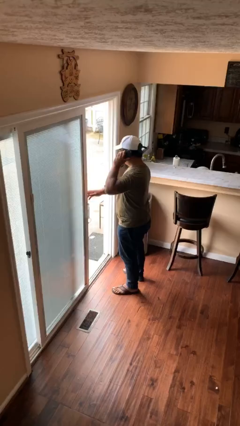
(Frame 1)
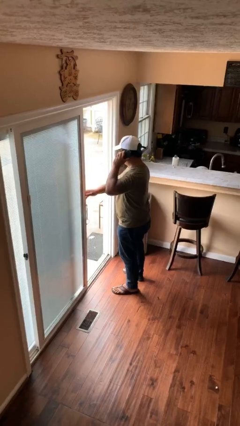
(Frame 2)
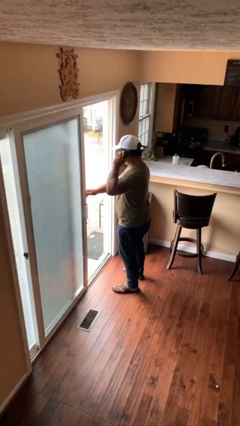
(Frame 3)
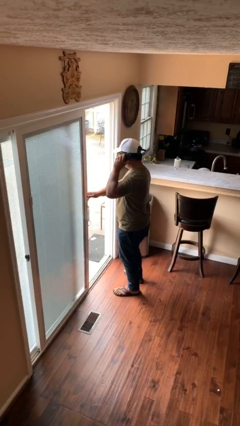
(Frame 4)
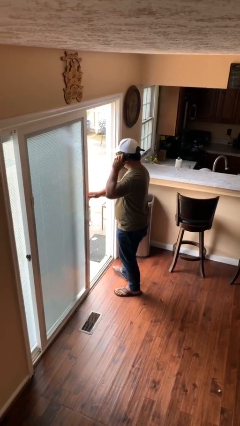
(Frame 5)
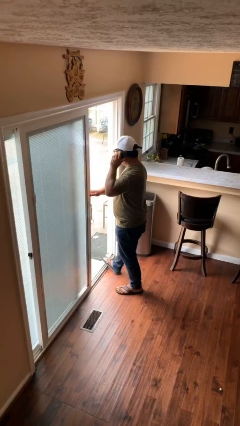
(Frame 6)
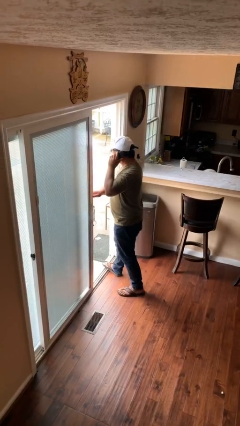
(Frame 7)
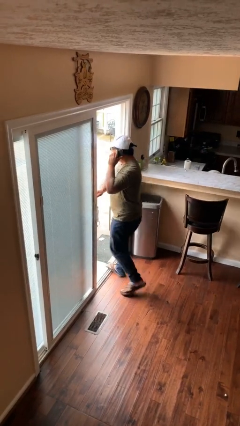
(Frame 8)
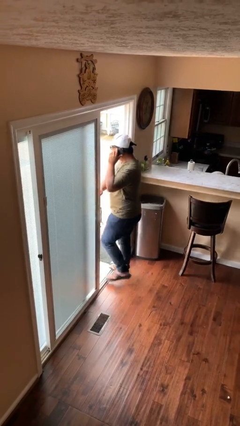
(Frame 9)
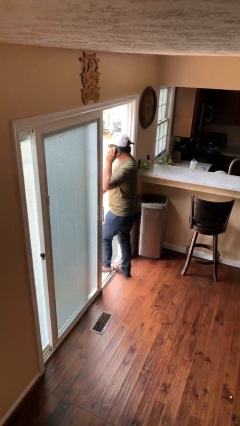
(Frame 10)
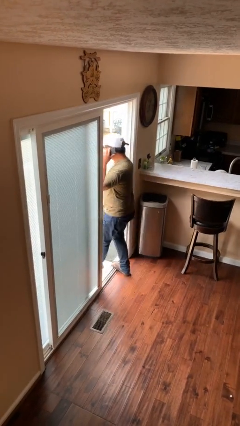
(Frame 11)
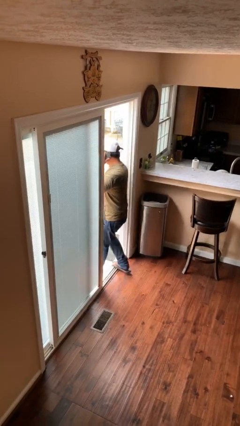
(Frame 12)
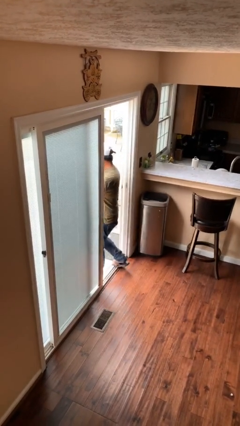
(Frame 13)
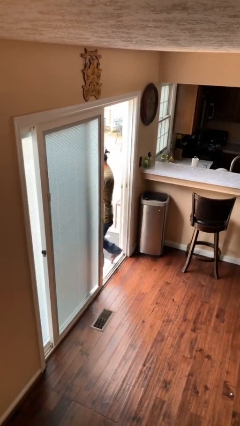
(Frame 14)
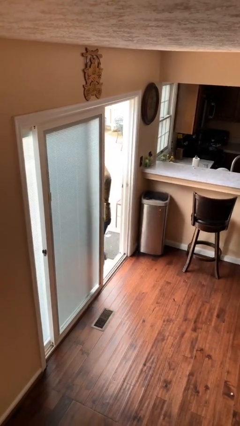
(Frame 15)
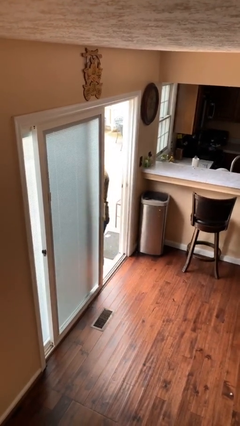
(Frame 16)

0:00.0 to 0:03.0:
person exits scene through structure

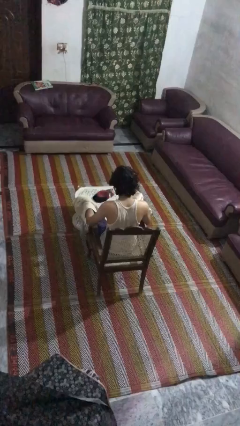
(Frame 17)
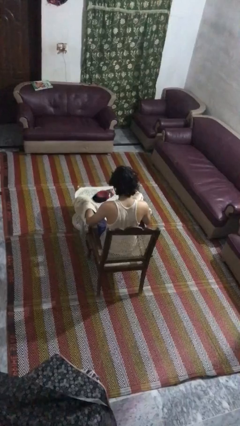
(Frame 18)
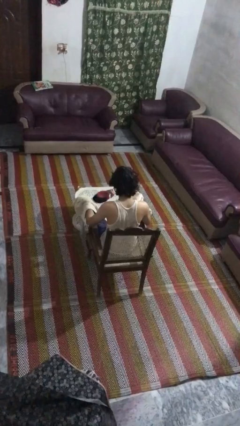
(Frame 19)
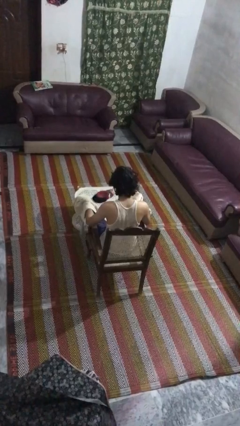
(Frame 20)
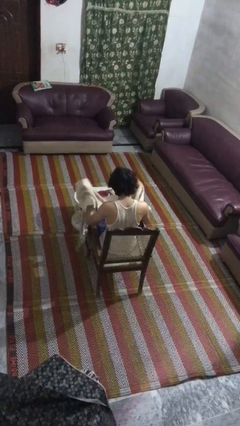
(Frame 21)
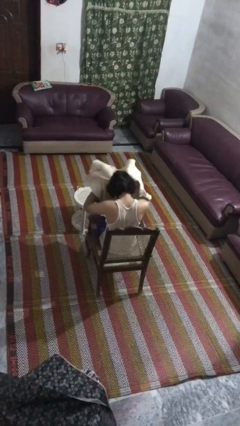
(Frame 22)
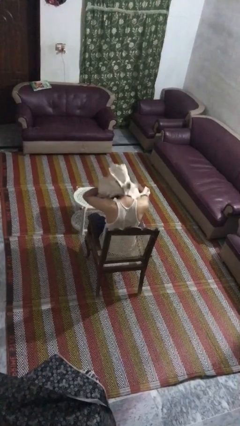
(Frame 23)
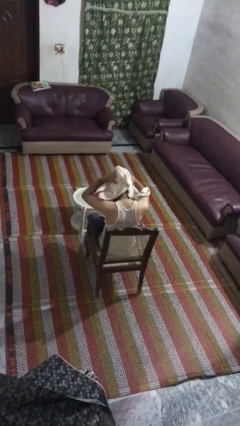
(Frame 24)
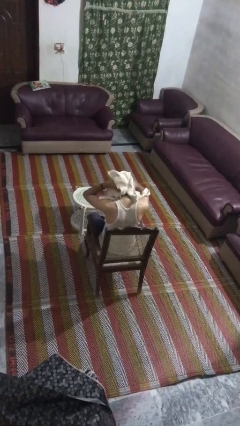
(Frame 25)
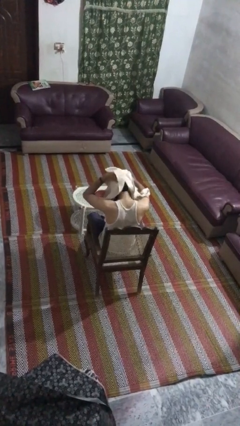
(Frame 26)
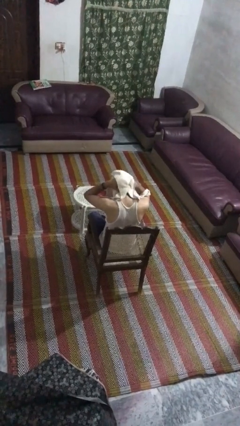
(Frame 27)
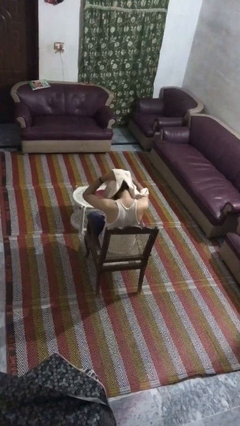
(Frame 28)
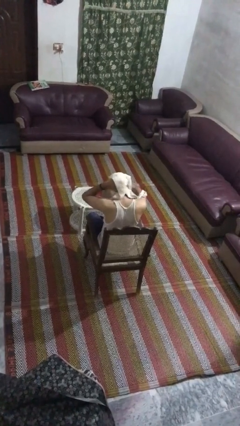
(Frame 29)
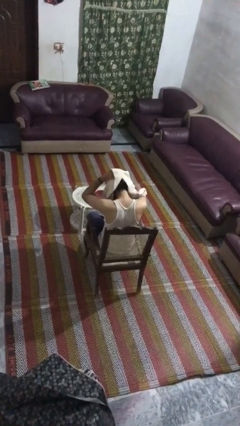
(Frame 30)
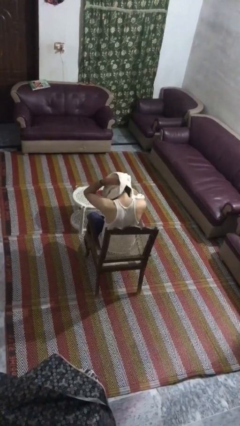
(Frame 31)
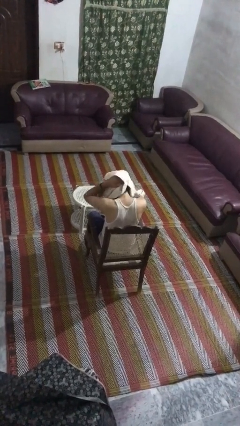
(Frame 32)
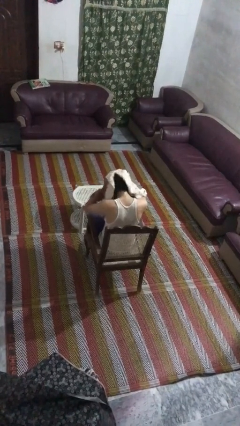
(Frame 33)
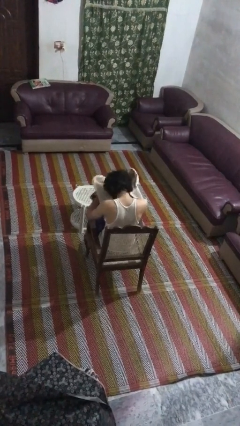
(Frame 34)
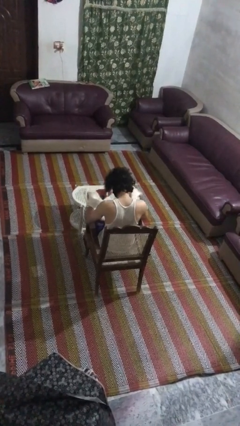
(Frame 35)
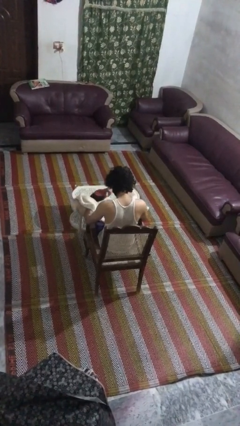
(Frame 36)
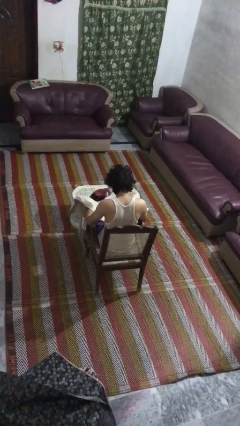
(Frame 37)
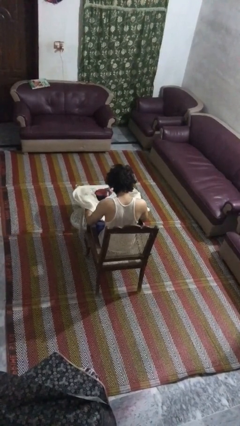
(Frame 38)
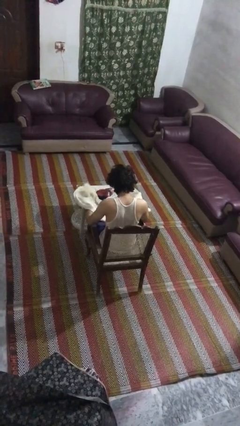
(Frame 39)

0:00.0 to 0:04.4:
person dries hair with towel

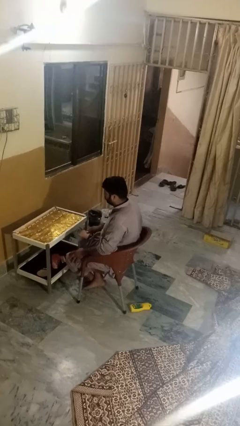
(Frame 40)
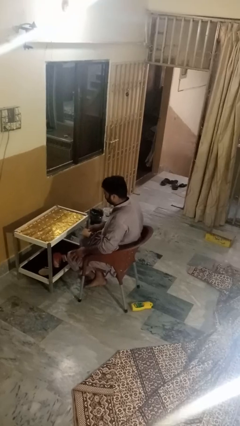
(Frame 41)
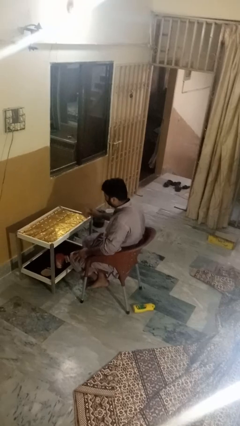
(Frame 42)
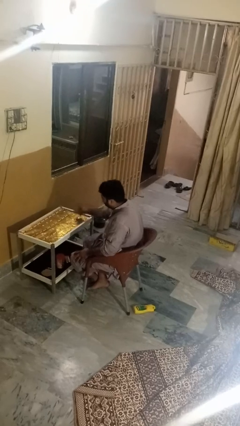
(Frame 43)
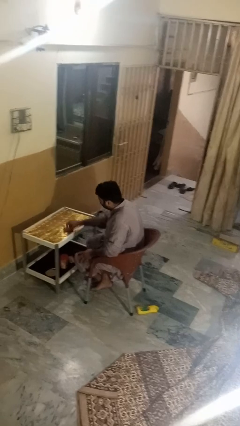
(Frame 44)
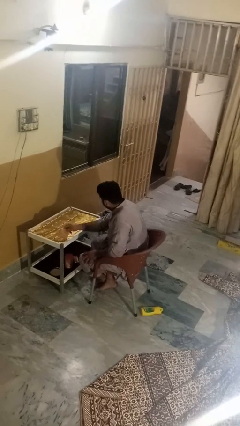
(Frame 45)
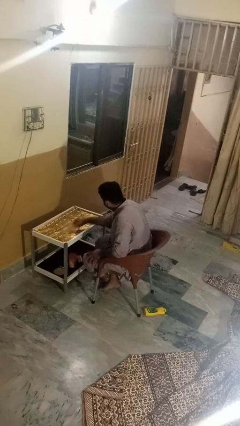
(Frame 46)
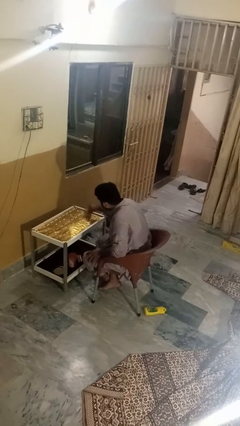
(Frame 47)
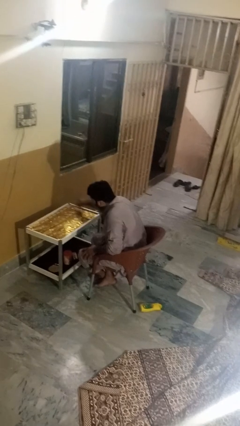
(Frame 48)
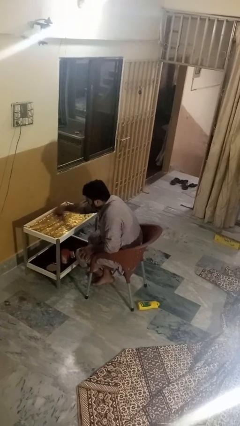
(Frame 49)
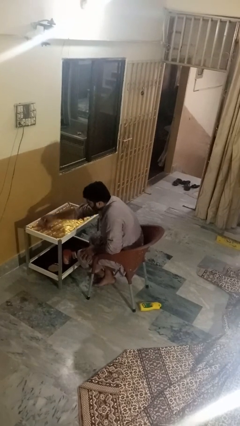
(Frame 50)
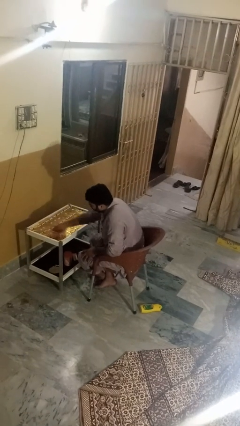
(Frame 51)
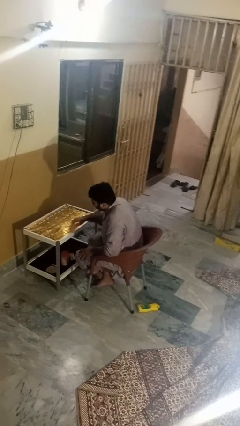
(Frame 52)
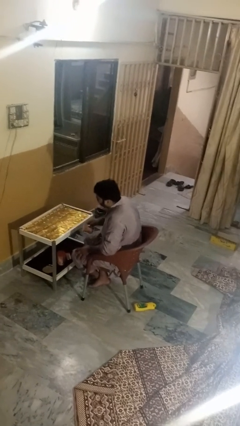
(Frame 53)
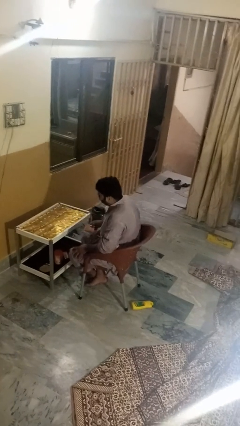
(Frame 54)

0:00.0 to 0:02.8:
person cleans table with rag

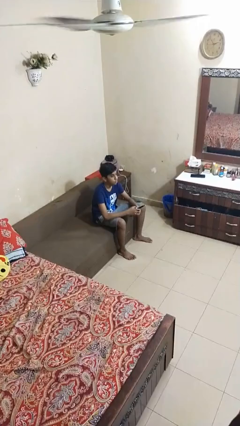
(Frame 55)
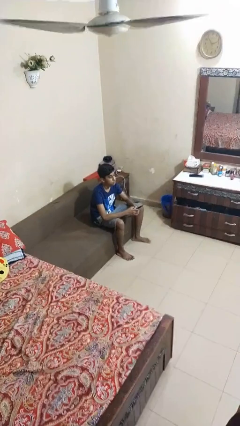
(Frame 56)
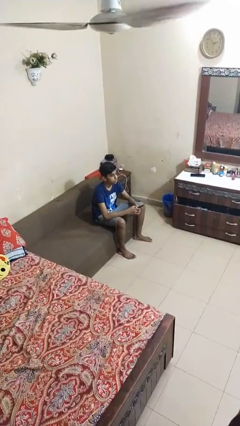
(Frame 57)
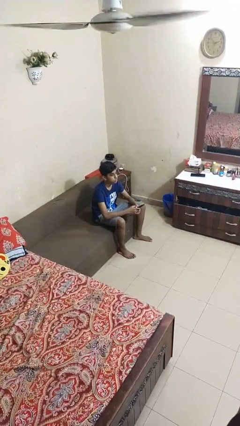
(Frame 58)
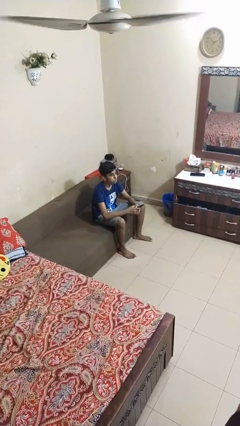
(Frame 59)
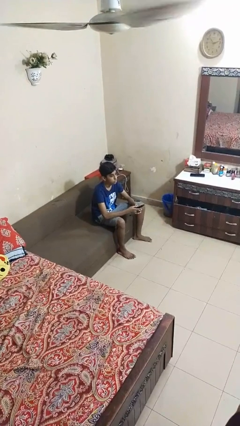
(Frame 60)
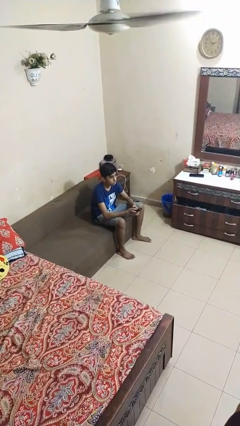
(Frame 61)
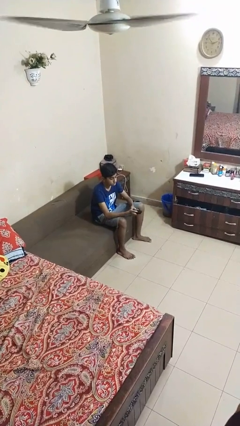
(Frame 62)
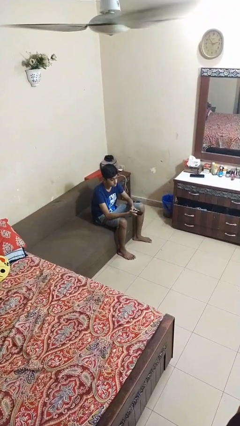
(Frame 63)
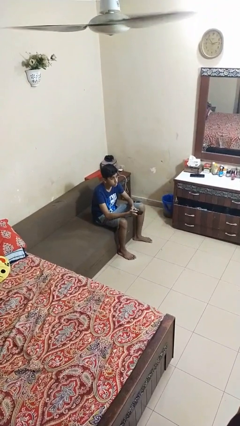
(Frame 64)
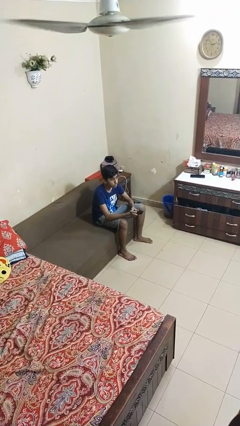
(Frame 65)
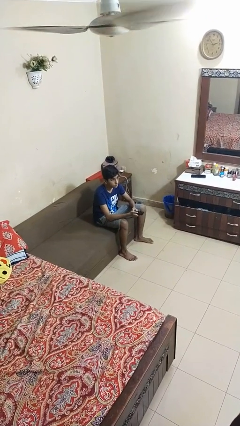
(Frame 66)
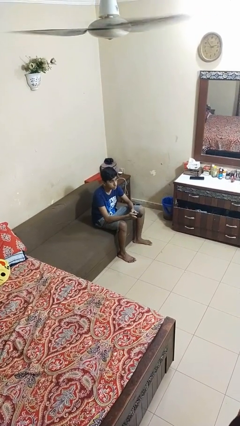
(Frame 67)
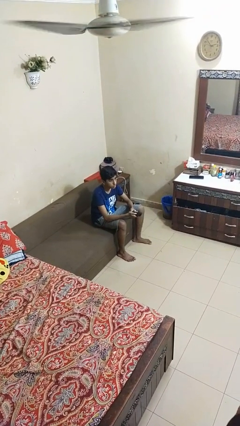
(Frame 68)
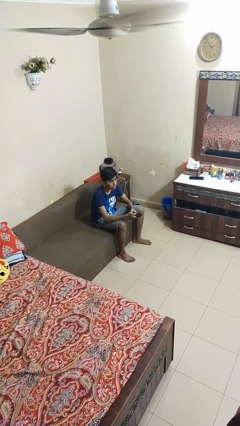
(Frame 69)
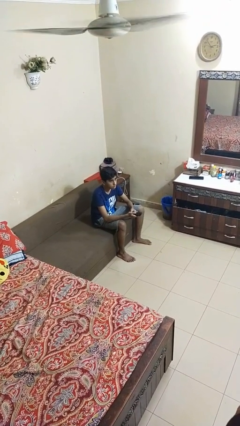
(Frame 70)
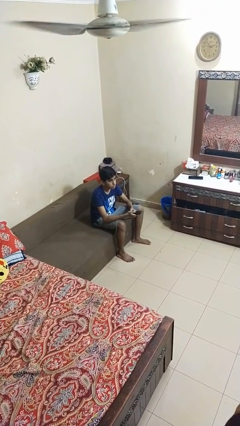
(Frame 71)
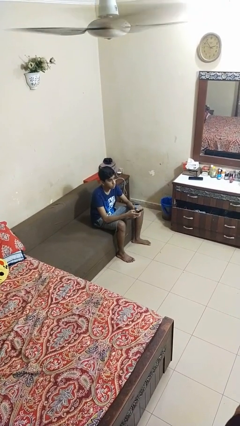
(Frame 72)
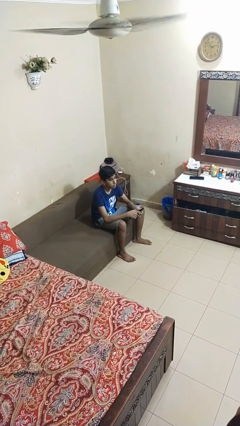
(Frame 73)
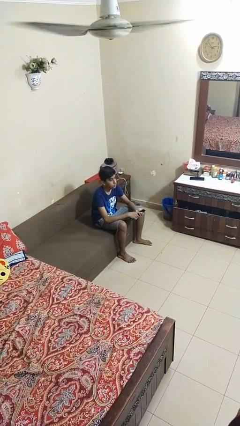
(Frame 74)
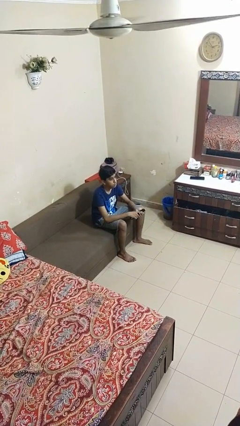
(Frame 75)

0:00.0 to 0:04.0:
person uses television remote

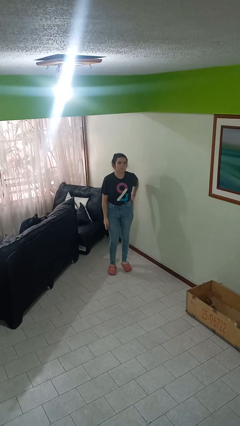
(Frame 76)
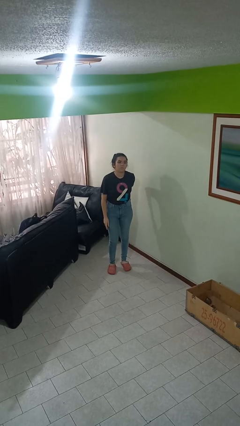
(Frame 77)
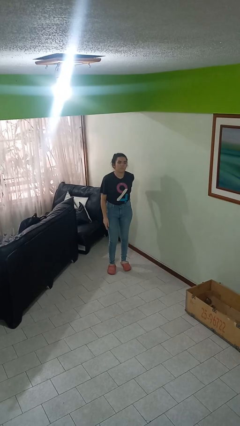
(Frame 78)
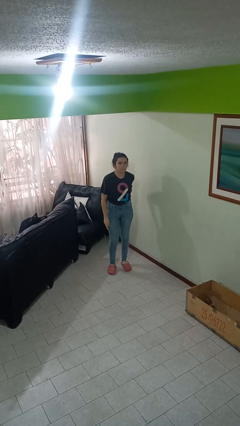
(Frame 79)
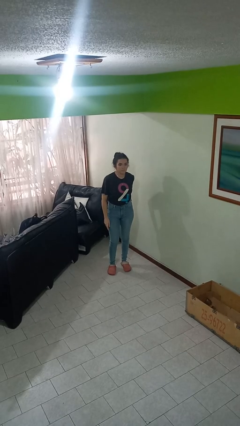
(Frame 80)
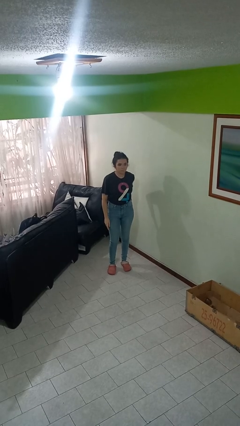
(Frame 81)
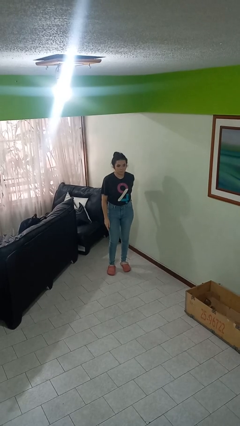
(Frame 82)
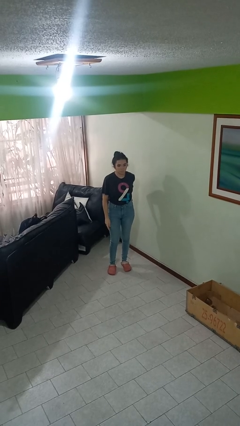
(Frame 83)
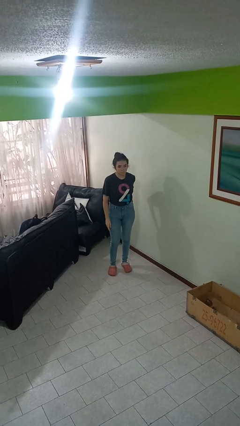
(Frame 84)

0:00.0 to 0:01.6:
person puts phone into pocket

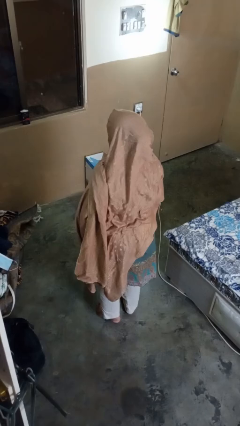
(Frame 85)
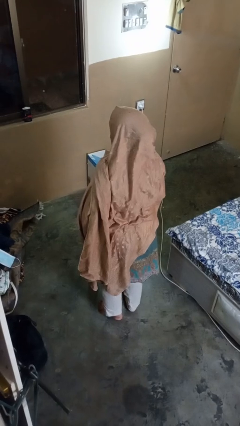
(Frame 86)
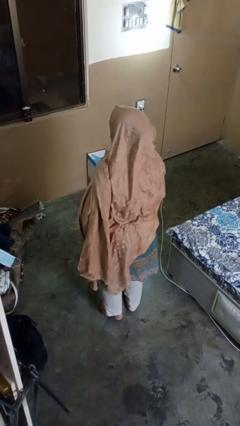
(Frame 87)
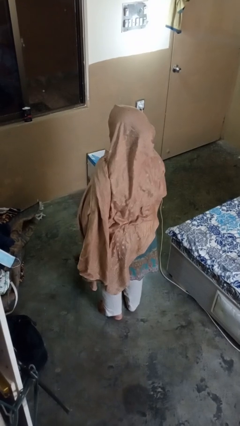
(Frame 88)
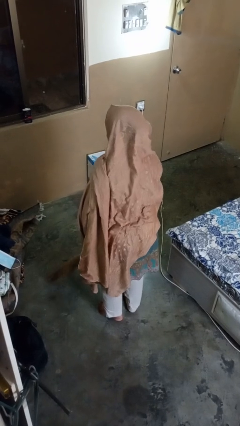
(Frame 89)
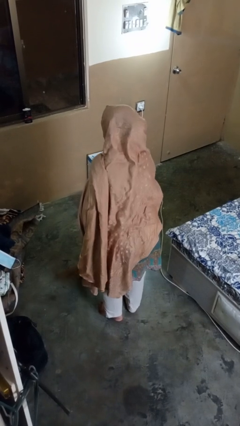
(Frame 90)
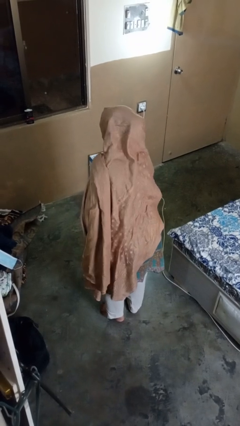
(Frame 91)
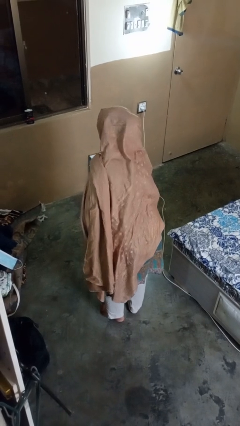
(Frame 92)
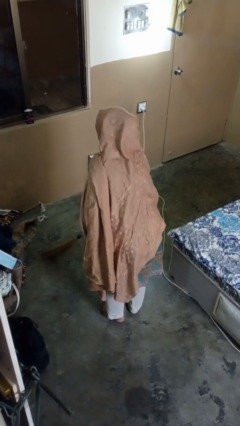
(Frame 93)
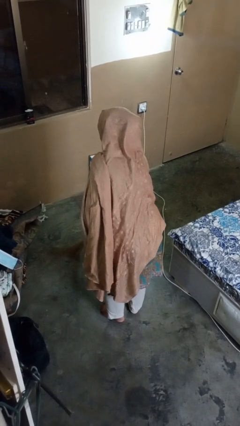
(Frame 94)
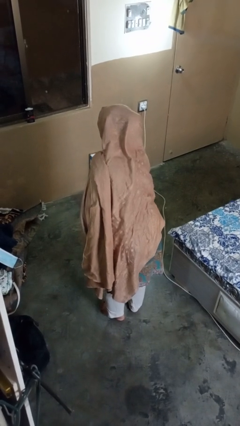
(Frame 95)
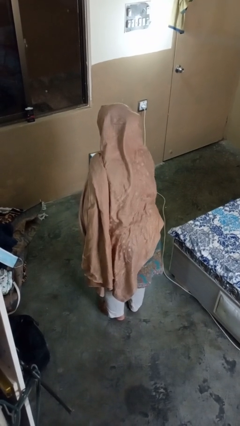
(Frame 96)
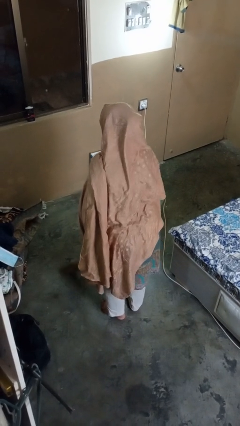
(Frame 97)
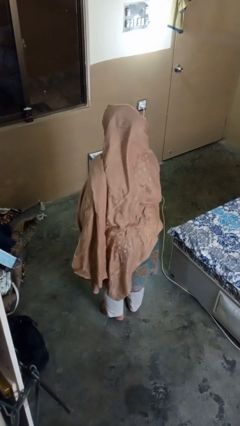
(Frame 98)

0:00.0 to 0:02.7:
person sweeps floor
